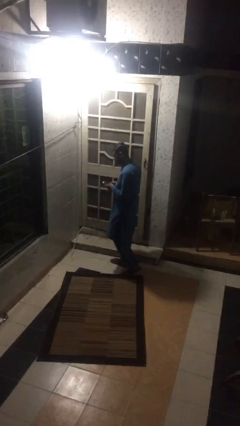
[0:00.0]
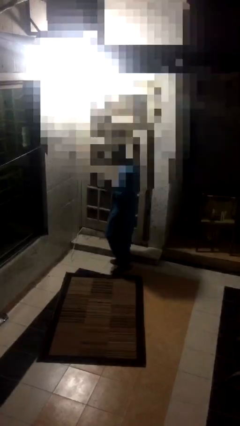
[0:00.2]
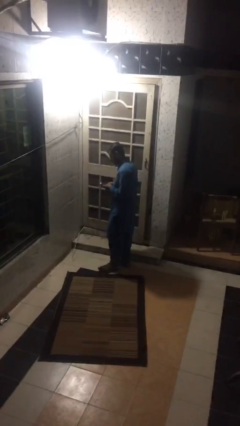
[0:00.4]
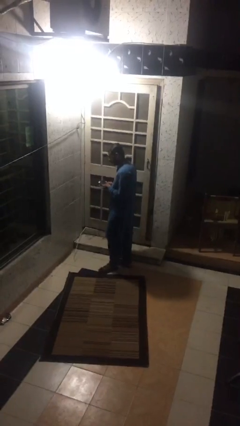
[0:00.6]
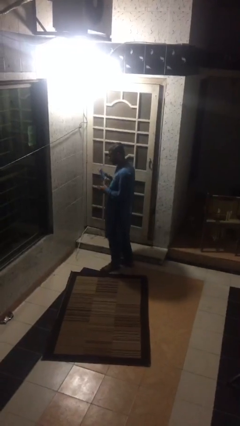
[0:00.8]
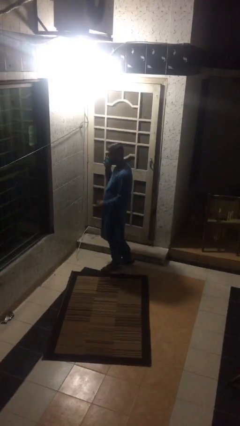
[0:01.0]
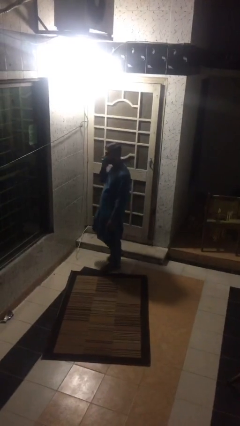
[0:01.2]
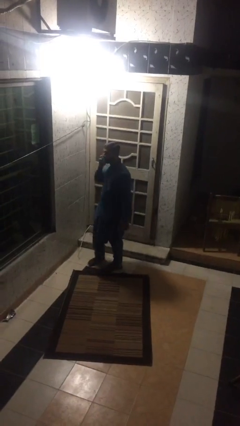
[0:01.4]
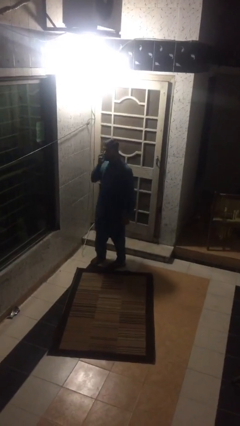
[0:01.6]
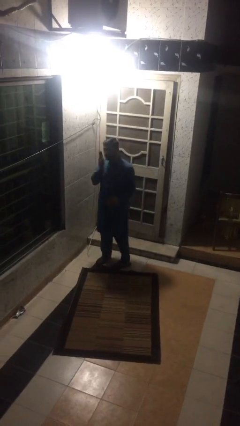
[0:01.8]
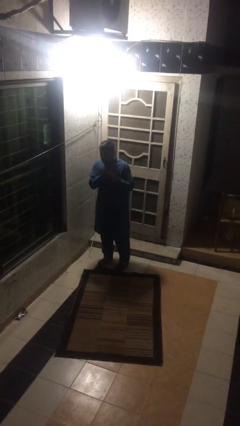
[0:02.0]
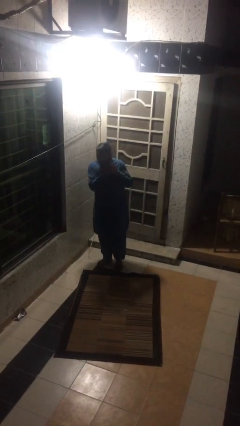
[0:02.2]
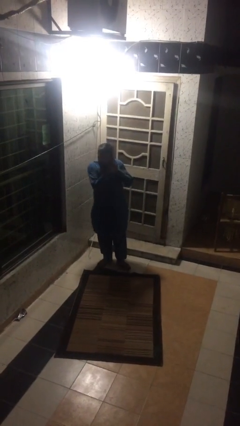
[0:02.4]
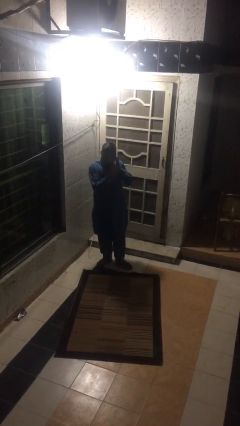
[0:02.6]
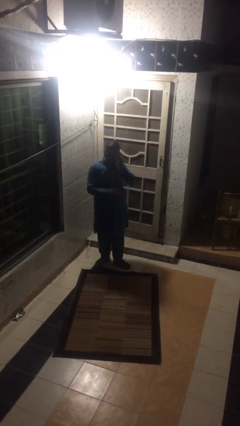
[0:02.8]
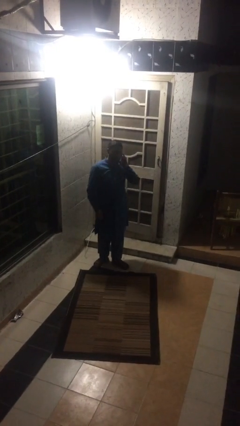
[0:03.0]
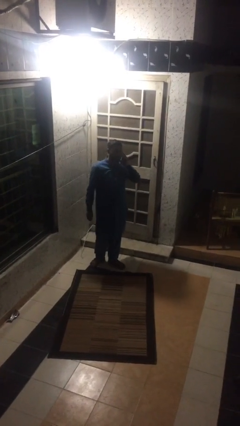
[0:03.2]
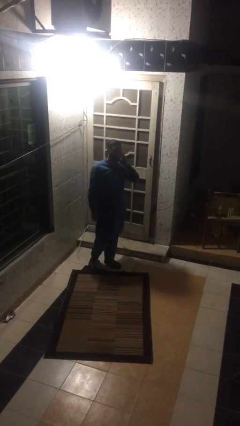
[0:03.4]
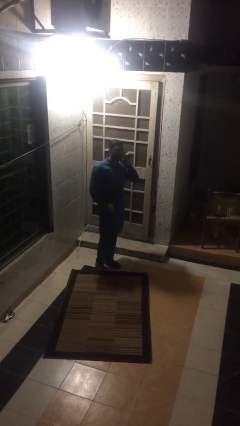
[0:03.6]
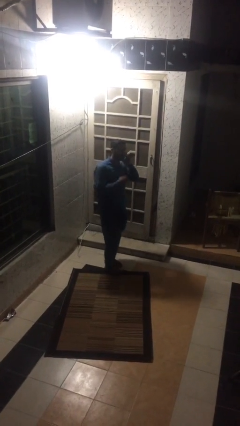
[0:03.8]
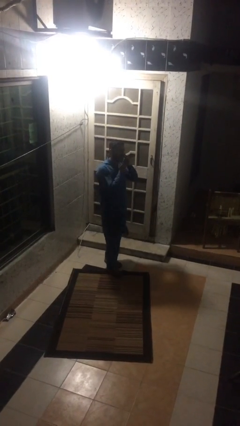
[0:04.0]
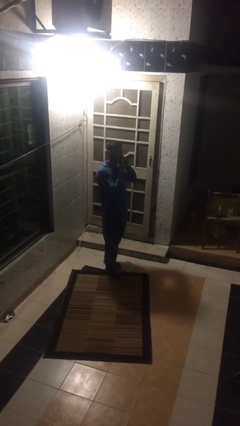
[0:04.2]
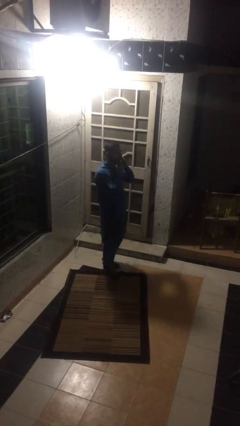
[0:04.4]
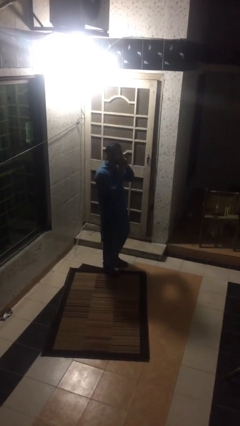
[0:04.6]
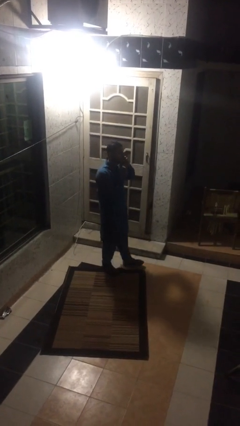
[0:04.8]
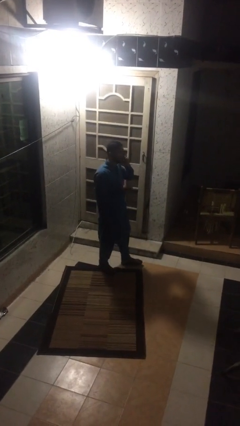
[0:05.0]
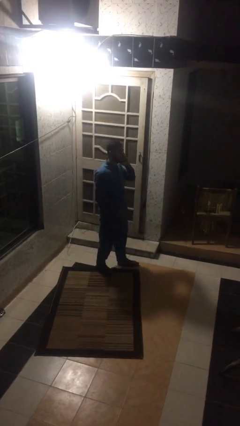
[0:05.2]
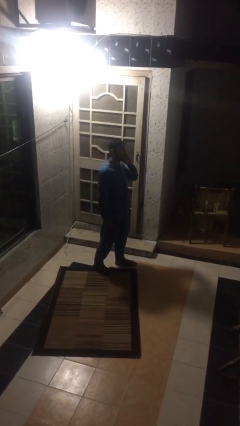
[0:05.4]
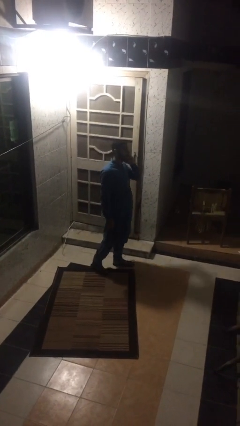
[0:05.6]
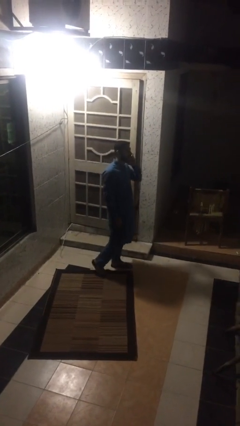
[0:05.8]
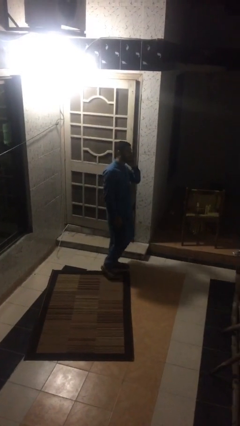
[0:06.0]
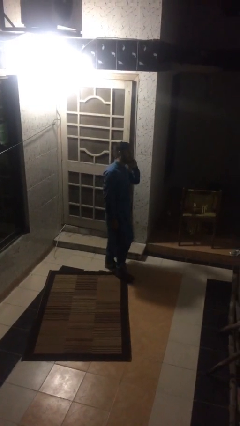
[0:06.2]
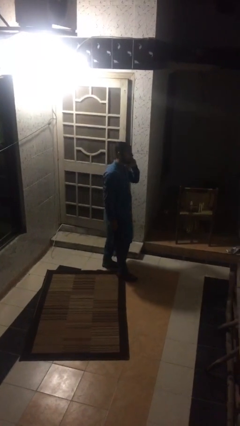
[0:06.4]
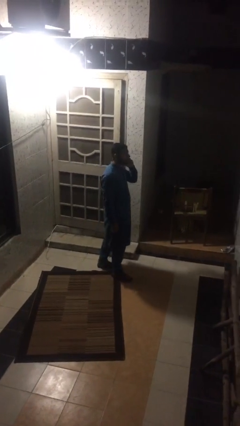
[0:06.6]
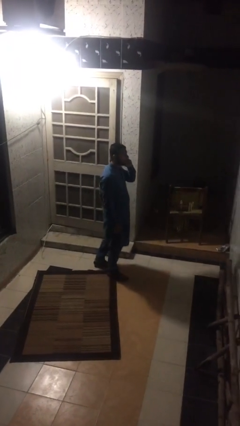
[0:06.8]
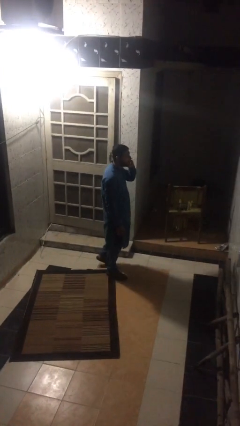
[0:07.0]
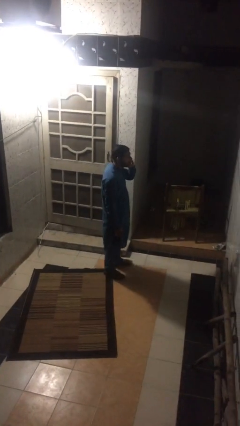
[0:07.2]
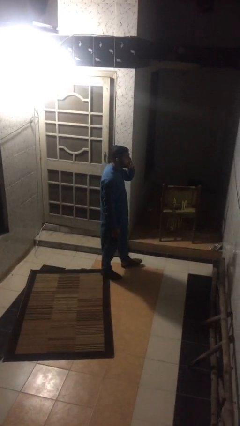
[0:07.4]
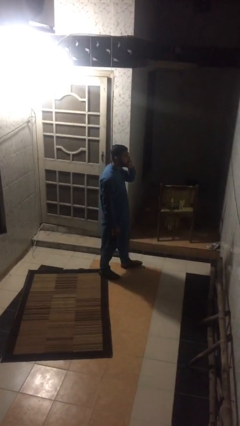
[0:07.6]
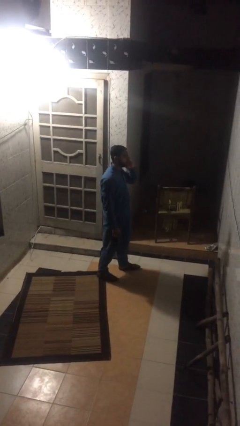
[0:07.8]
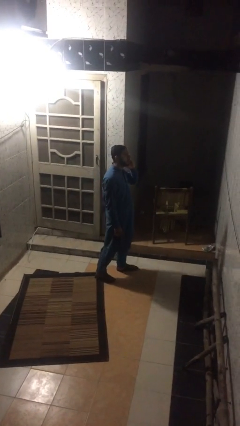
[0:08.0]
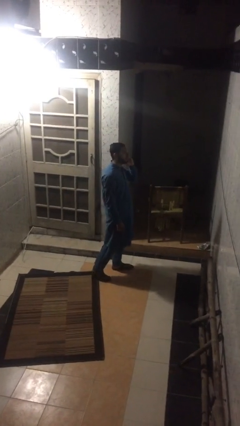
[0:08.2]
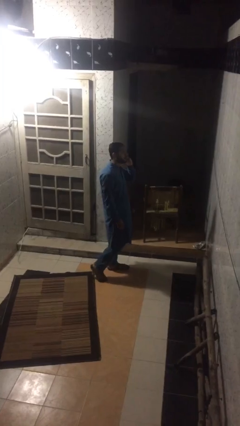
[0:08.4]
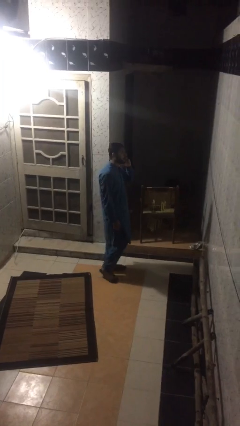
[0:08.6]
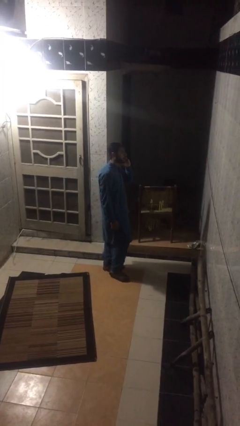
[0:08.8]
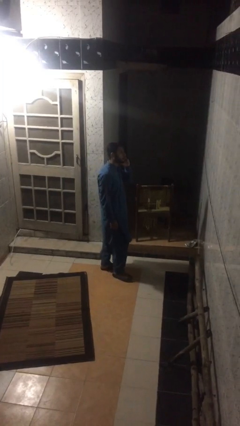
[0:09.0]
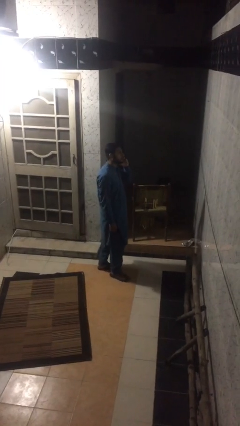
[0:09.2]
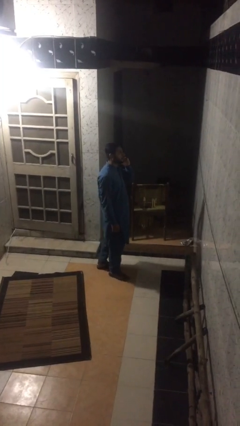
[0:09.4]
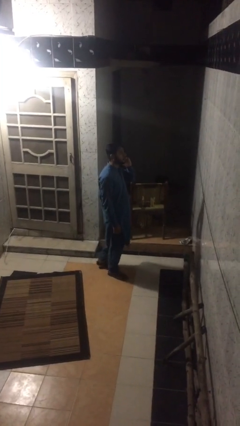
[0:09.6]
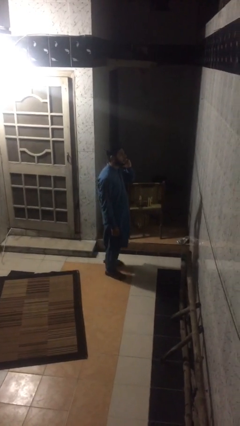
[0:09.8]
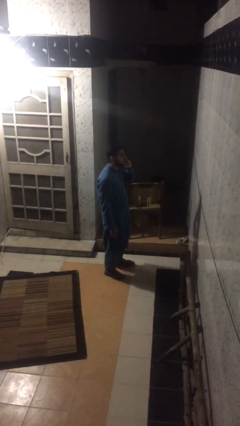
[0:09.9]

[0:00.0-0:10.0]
person talks on phone

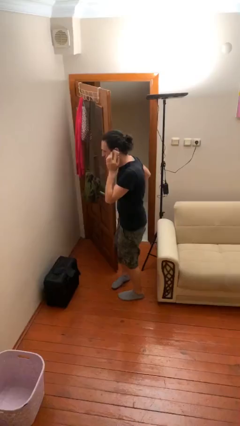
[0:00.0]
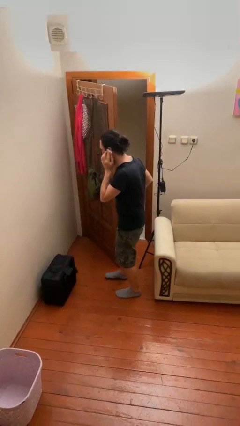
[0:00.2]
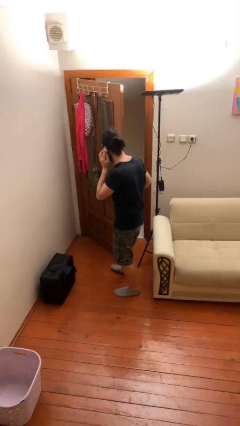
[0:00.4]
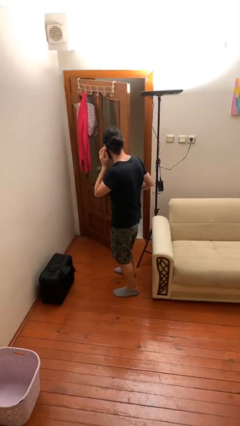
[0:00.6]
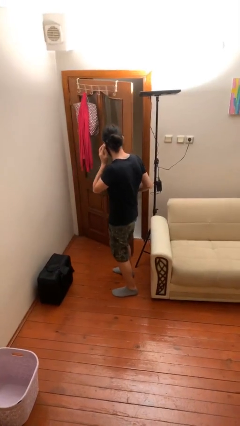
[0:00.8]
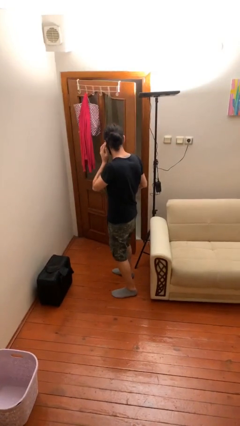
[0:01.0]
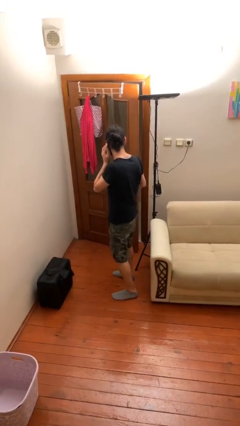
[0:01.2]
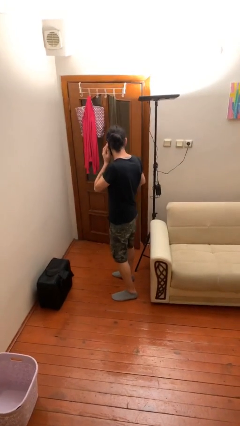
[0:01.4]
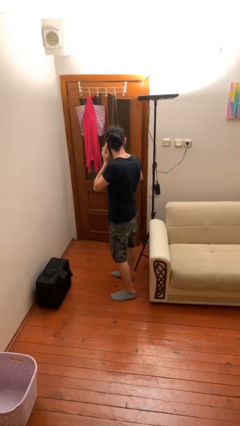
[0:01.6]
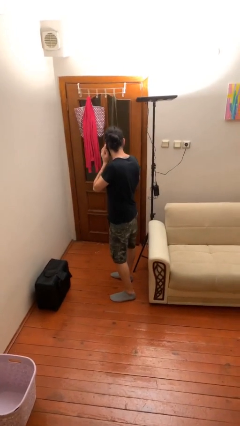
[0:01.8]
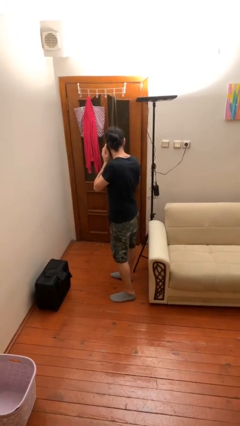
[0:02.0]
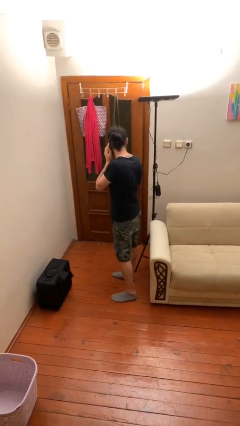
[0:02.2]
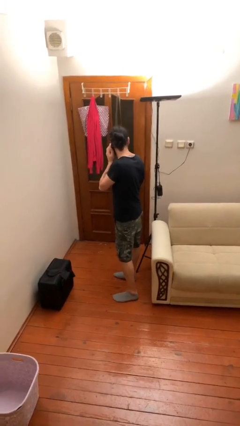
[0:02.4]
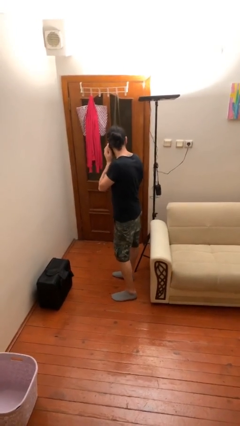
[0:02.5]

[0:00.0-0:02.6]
person closes facility door

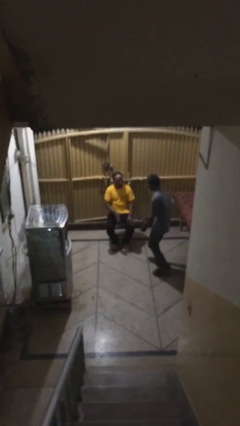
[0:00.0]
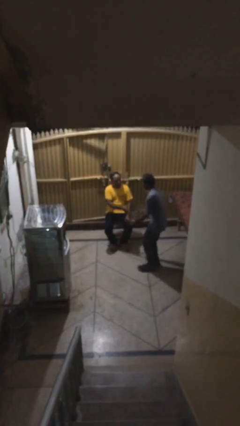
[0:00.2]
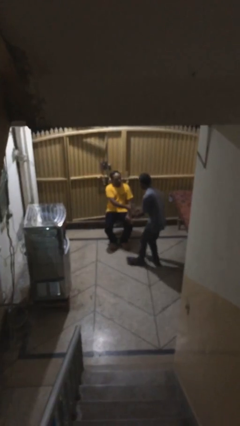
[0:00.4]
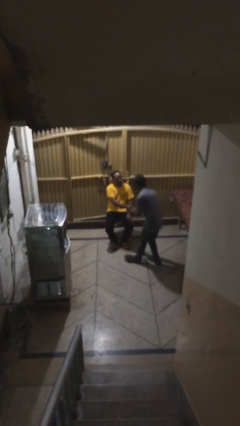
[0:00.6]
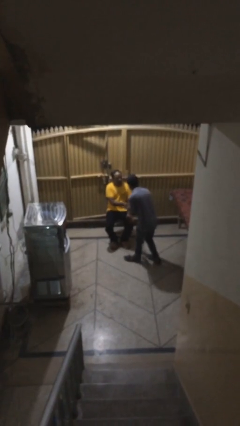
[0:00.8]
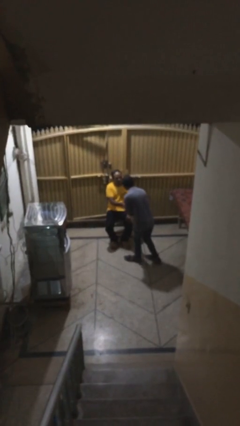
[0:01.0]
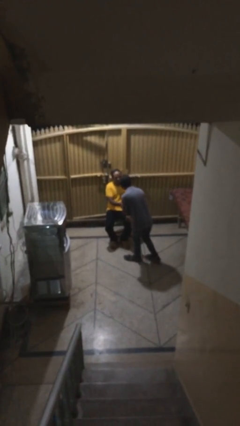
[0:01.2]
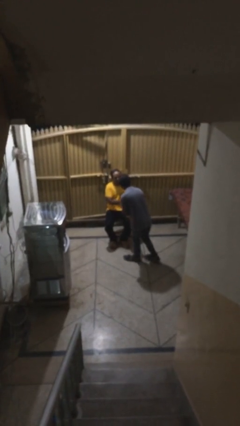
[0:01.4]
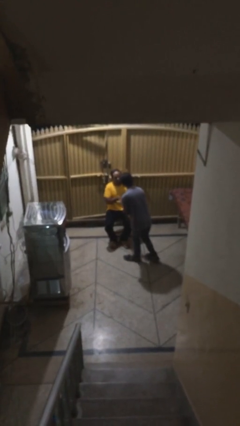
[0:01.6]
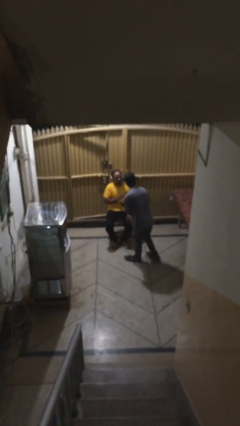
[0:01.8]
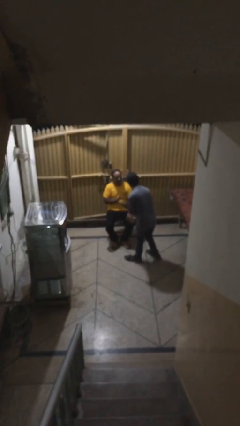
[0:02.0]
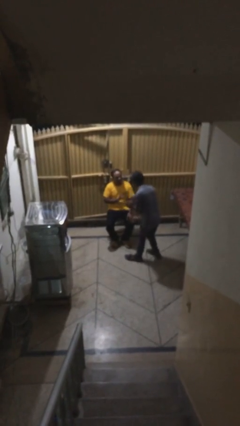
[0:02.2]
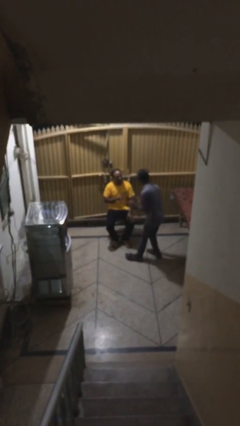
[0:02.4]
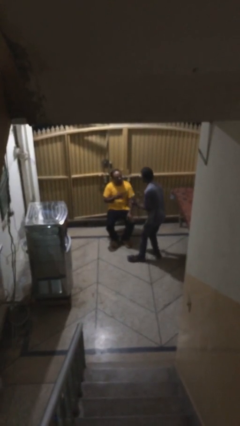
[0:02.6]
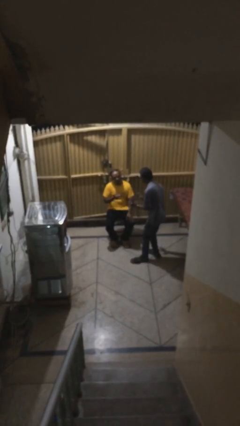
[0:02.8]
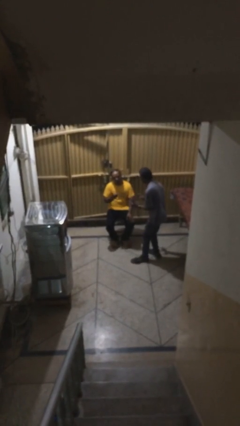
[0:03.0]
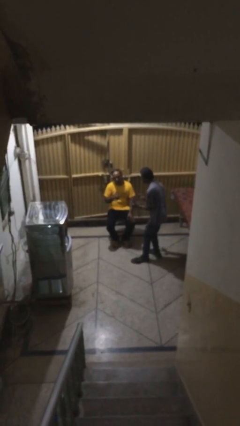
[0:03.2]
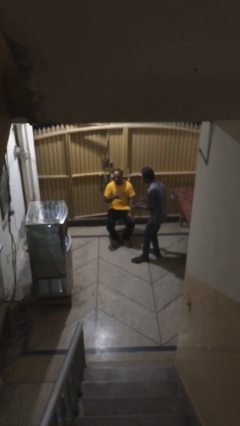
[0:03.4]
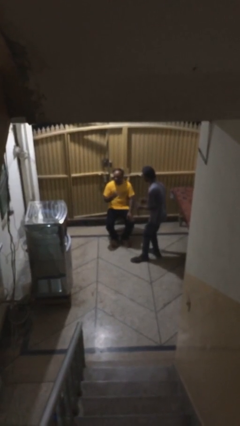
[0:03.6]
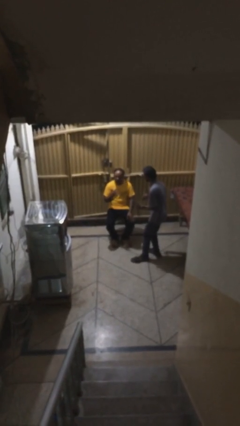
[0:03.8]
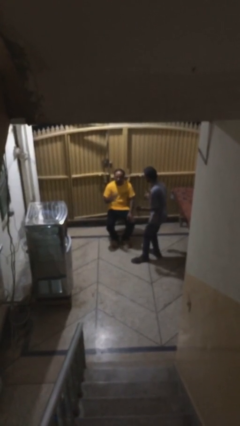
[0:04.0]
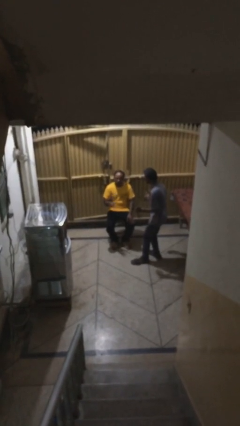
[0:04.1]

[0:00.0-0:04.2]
person shakes hand

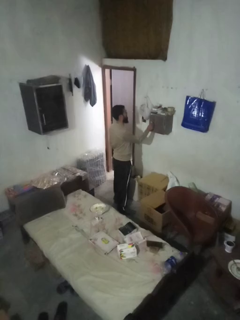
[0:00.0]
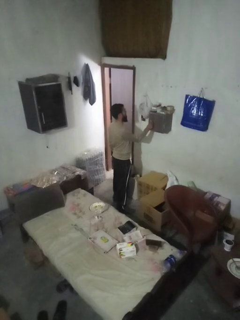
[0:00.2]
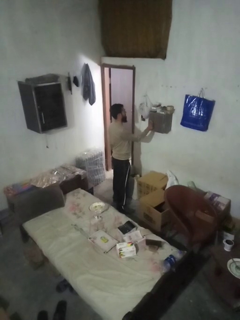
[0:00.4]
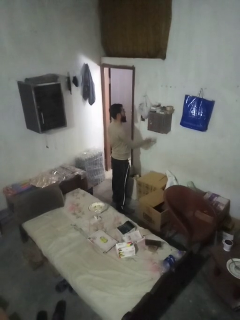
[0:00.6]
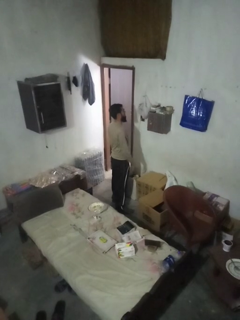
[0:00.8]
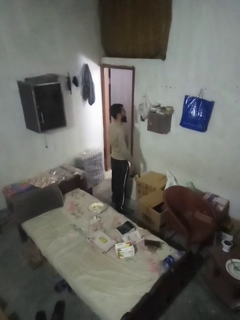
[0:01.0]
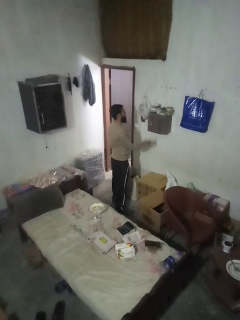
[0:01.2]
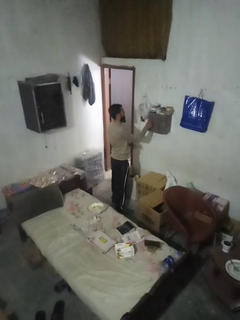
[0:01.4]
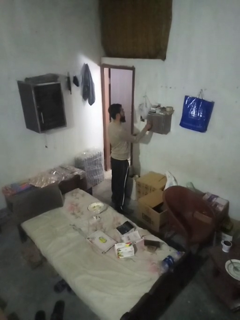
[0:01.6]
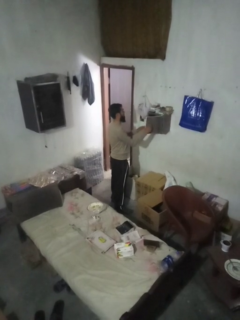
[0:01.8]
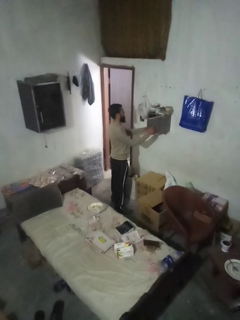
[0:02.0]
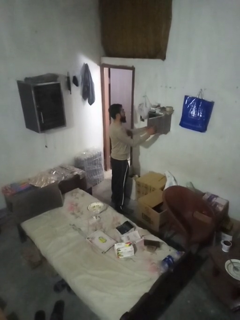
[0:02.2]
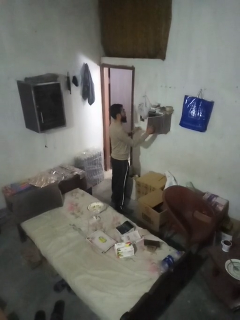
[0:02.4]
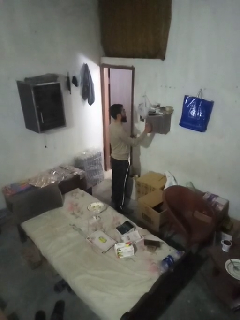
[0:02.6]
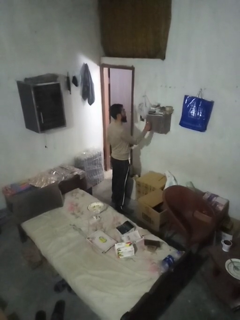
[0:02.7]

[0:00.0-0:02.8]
person takes letters from mailbox
